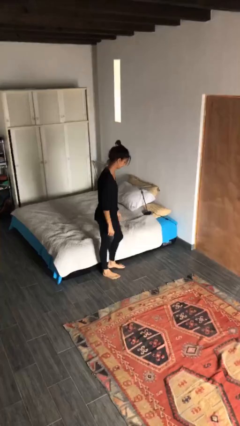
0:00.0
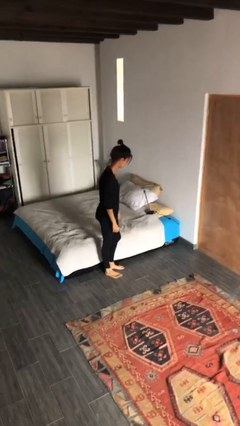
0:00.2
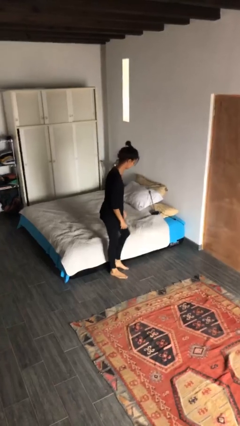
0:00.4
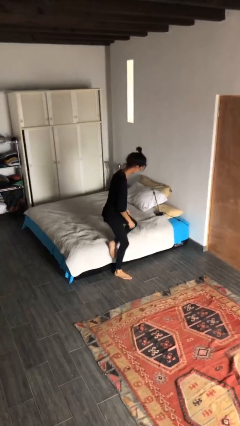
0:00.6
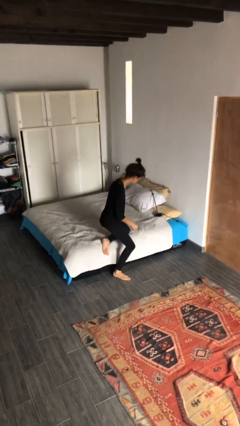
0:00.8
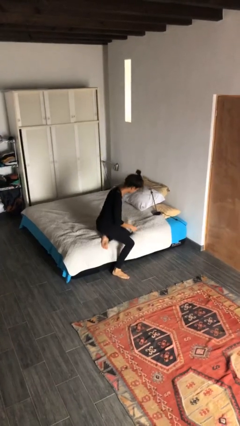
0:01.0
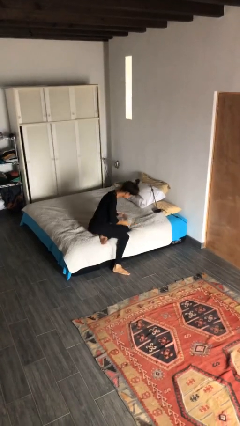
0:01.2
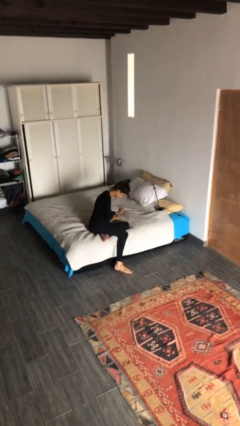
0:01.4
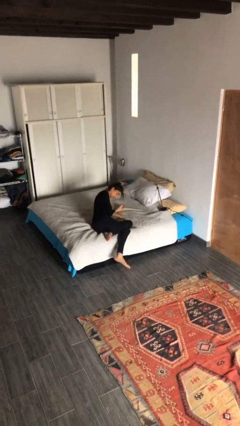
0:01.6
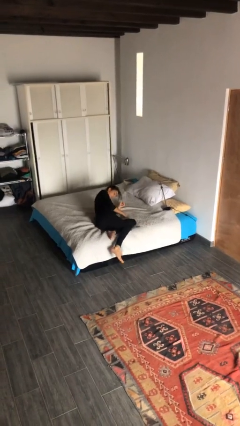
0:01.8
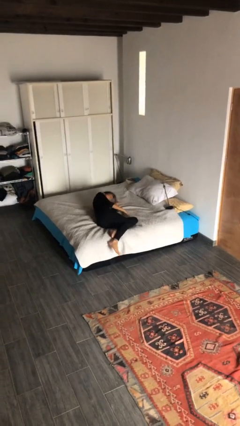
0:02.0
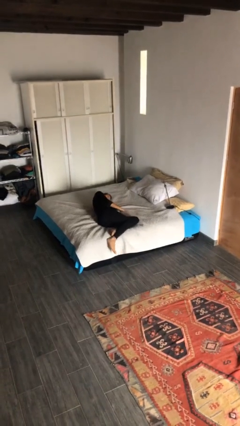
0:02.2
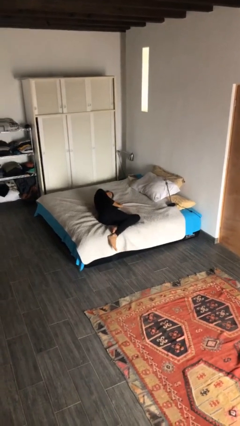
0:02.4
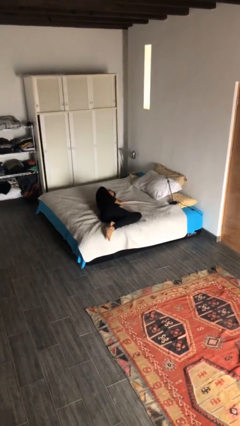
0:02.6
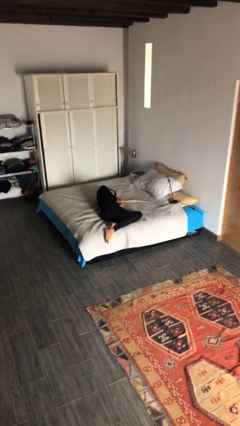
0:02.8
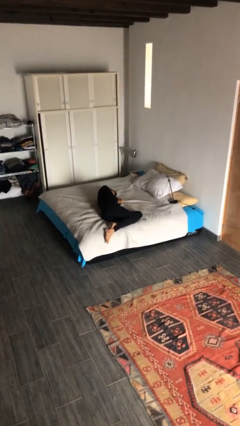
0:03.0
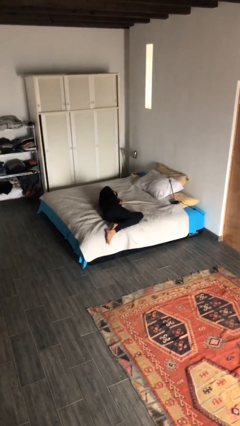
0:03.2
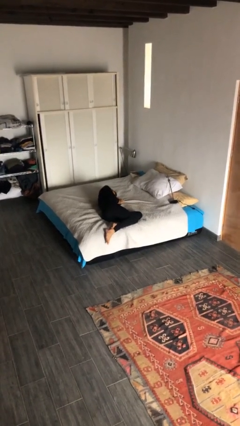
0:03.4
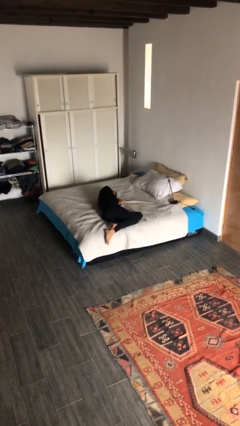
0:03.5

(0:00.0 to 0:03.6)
person lies down on bed

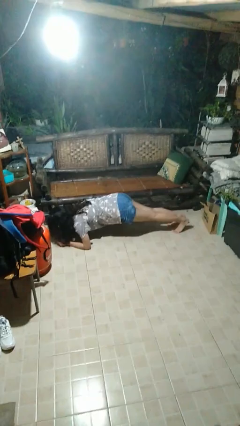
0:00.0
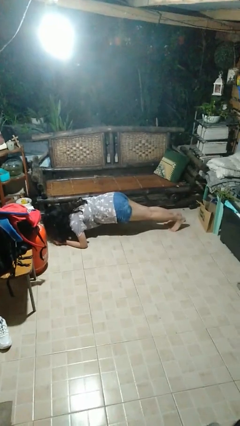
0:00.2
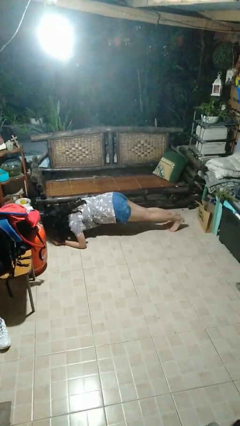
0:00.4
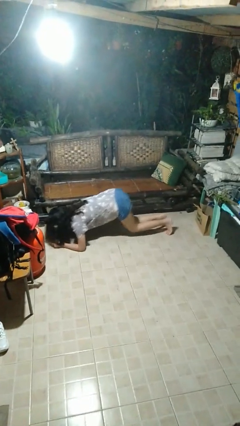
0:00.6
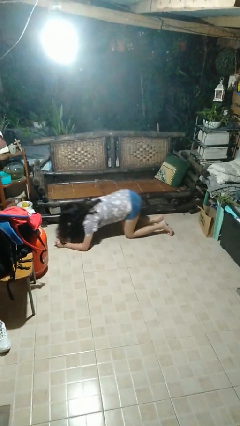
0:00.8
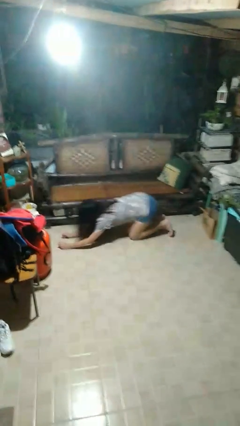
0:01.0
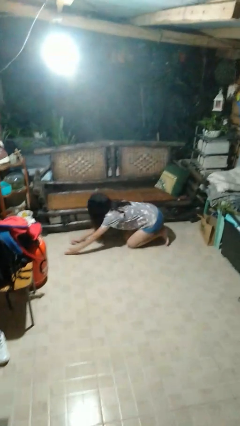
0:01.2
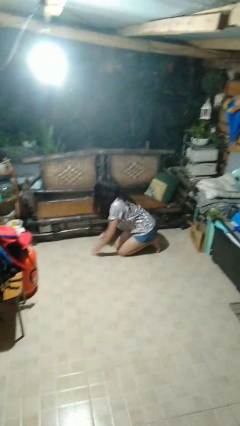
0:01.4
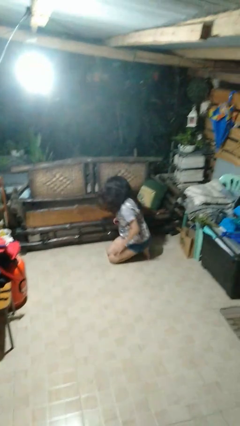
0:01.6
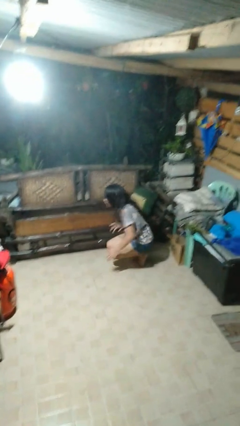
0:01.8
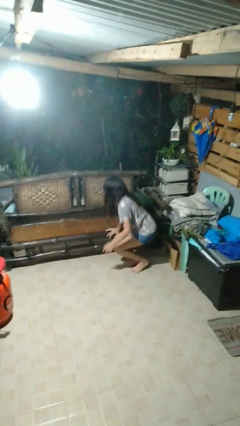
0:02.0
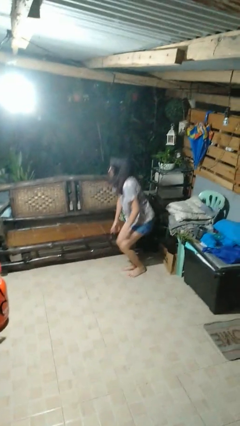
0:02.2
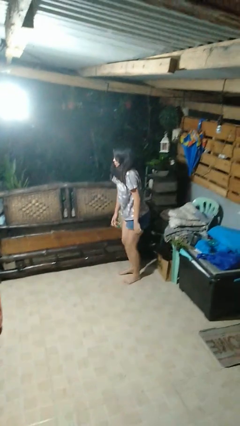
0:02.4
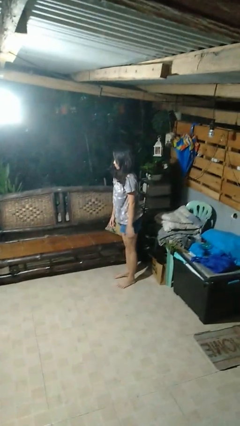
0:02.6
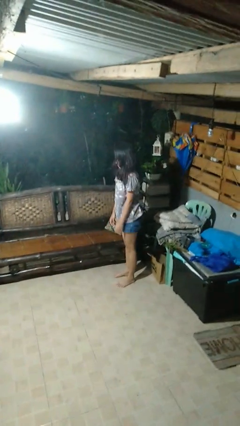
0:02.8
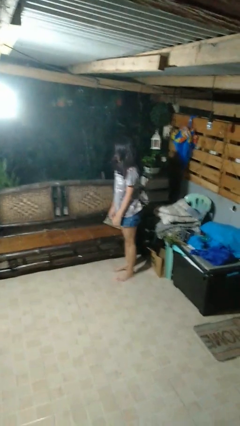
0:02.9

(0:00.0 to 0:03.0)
person stands up from floor

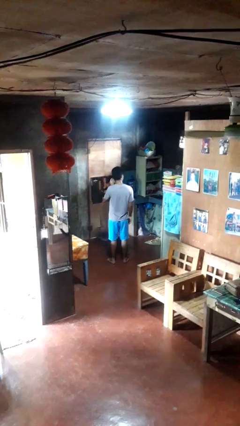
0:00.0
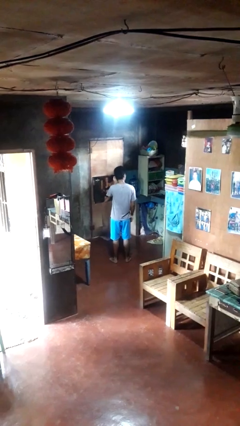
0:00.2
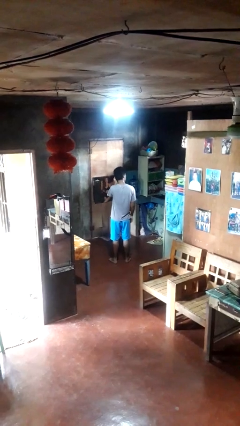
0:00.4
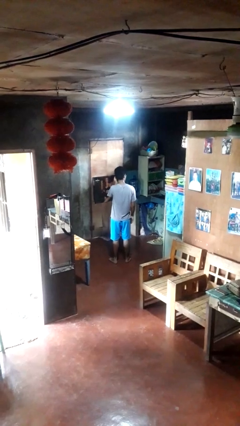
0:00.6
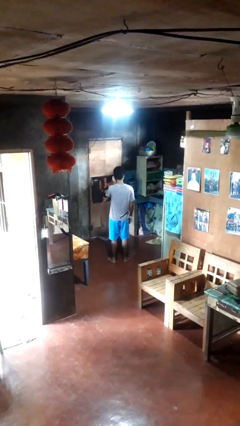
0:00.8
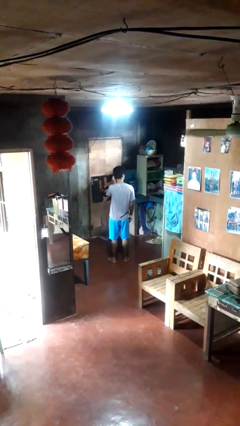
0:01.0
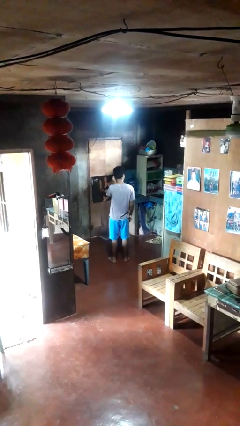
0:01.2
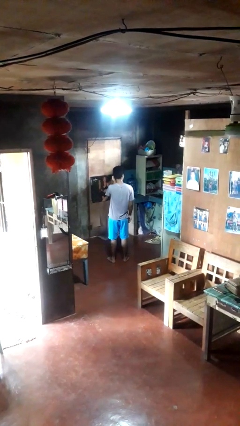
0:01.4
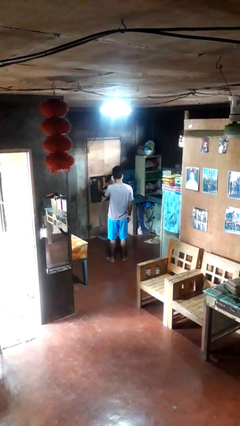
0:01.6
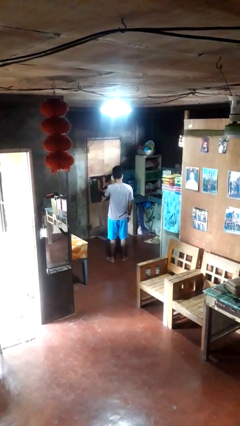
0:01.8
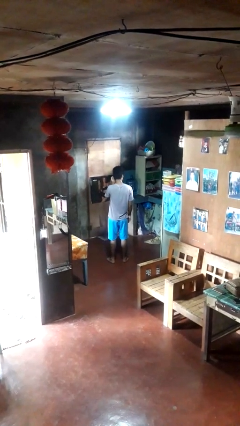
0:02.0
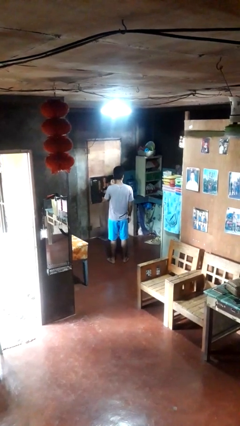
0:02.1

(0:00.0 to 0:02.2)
person touches earlobe

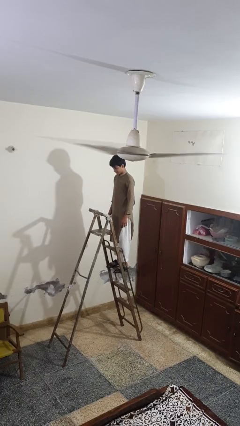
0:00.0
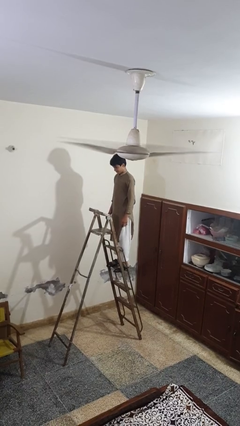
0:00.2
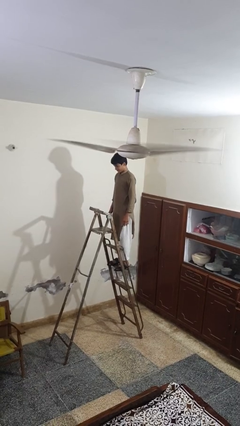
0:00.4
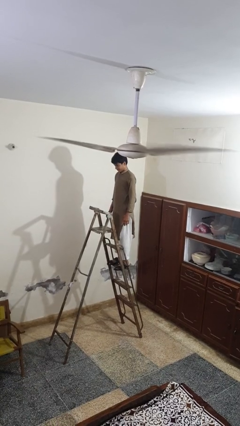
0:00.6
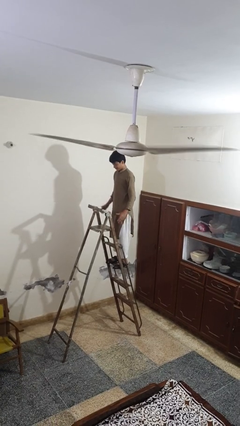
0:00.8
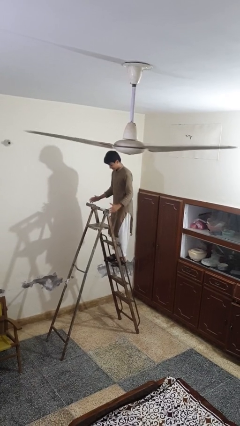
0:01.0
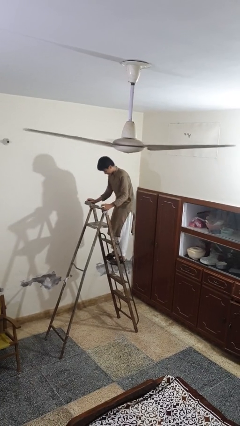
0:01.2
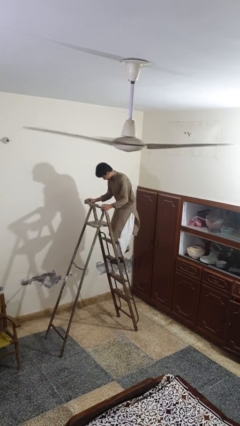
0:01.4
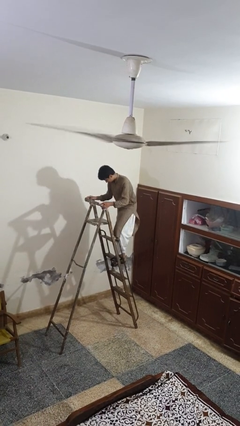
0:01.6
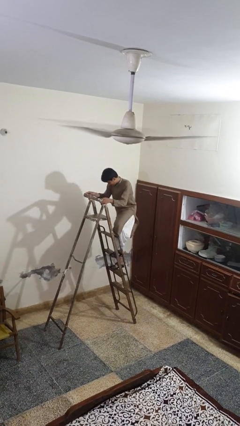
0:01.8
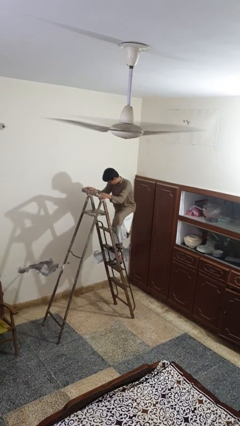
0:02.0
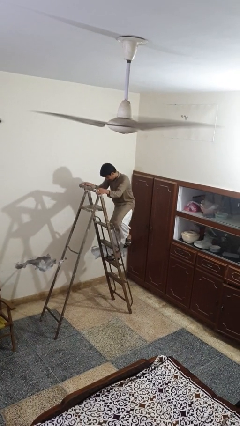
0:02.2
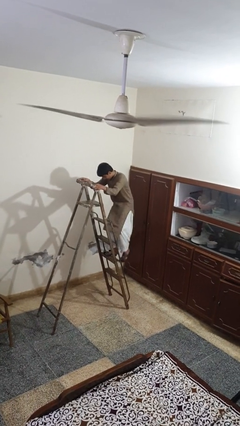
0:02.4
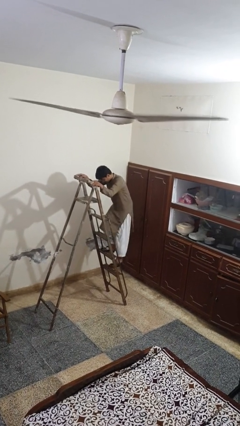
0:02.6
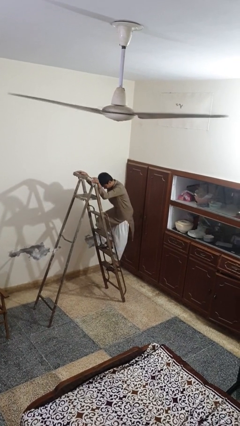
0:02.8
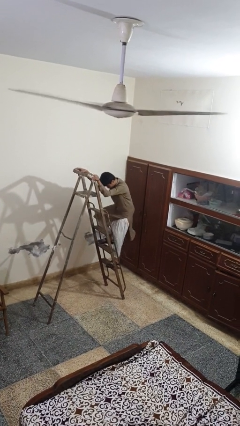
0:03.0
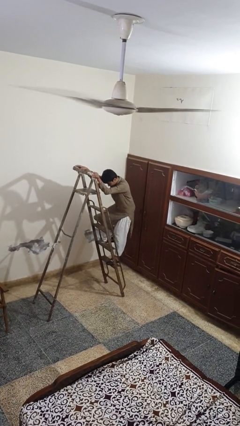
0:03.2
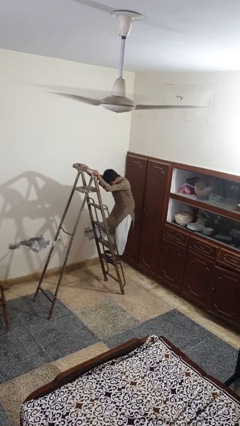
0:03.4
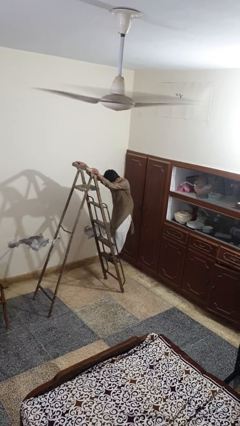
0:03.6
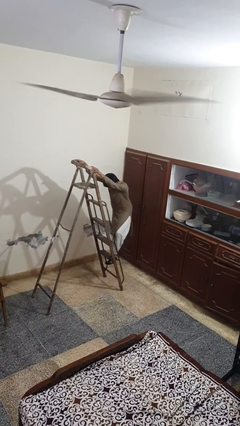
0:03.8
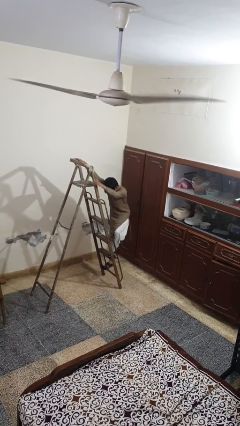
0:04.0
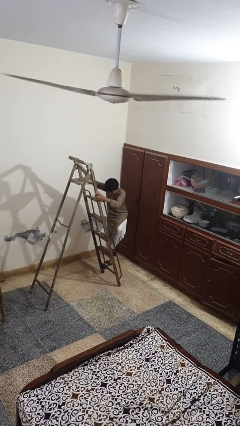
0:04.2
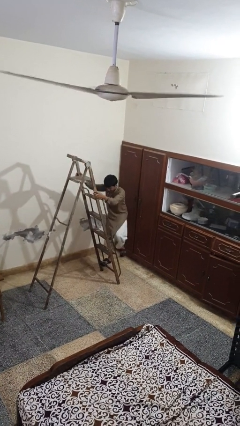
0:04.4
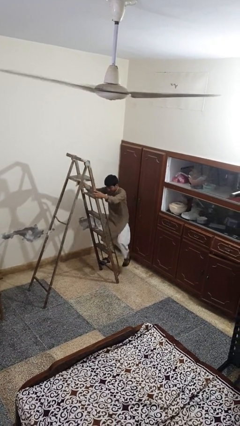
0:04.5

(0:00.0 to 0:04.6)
person climbs down ladder

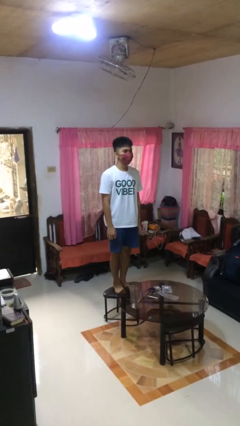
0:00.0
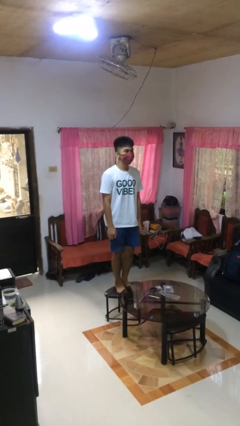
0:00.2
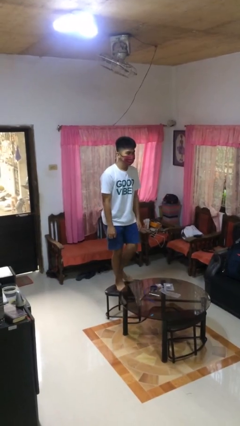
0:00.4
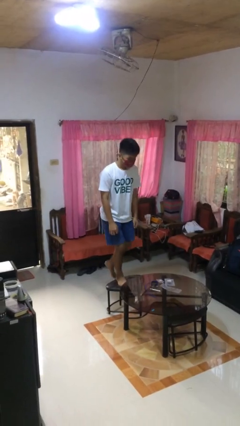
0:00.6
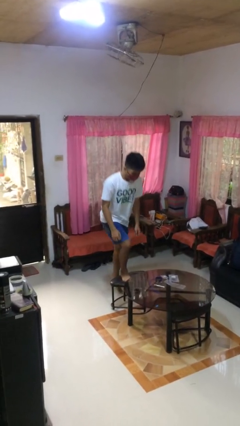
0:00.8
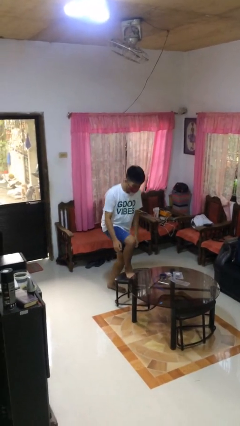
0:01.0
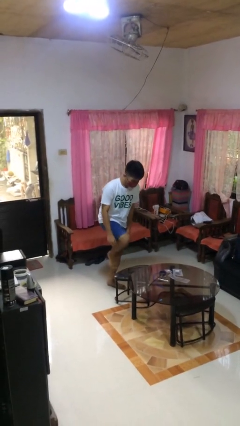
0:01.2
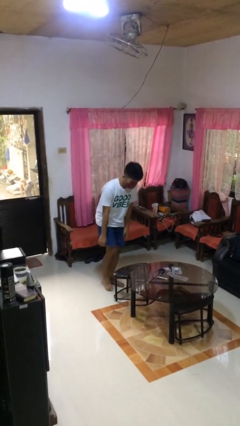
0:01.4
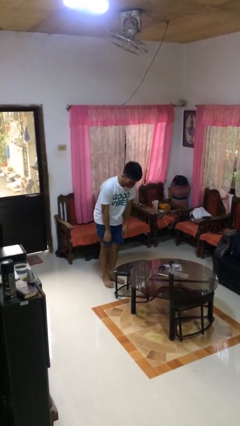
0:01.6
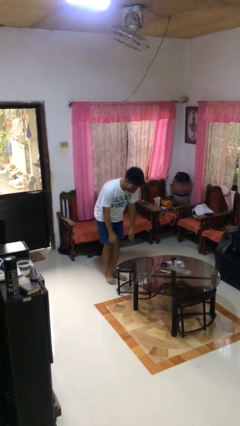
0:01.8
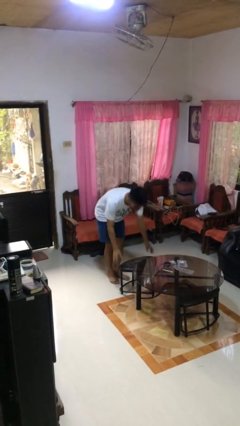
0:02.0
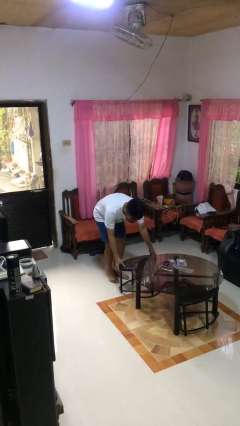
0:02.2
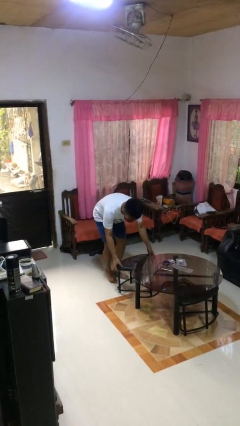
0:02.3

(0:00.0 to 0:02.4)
person climbs off chair

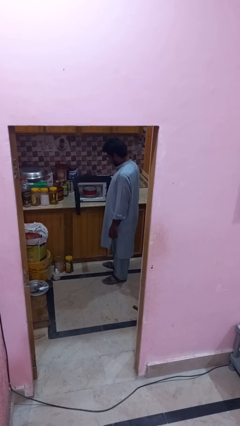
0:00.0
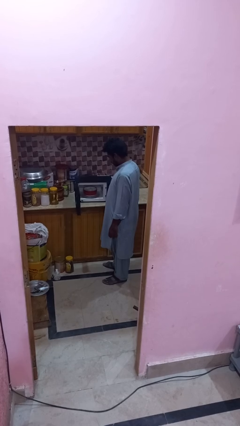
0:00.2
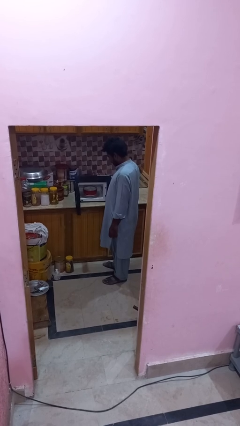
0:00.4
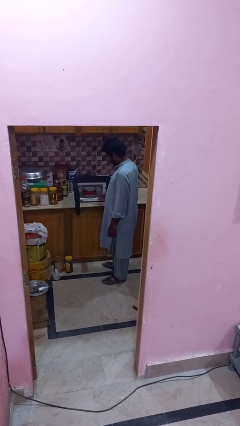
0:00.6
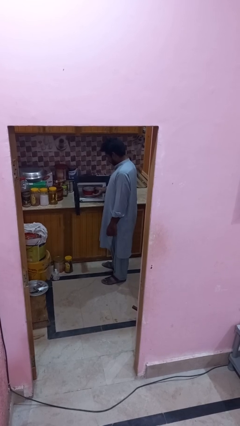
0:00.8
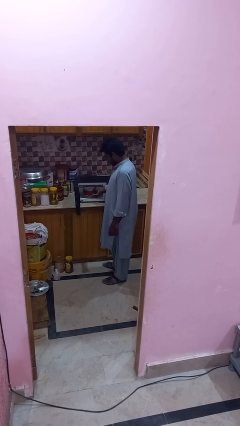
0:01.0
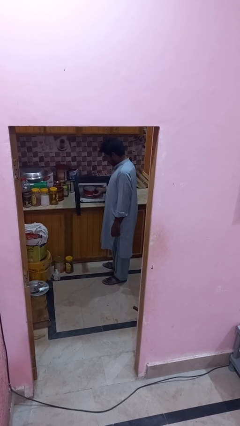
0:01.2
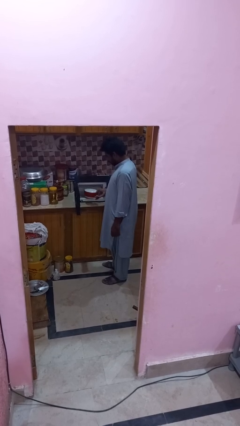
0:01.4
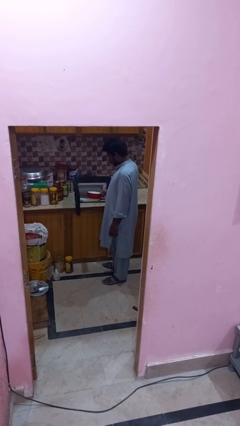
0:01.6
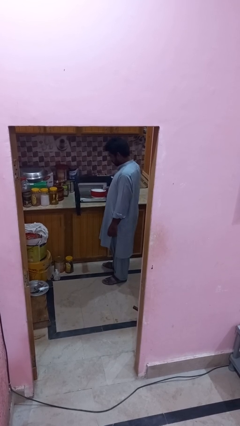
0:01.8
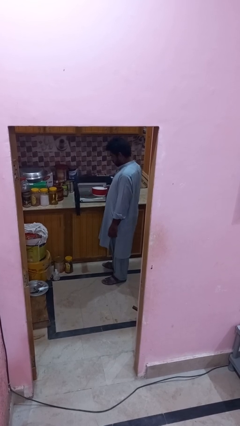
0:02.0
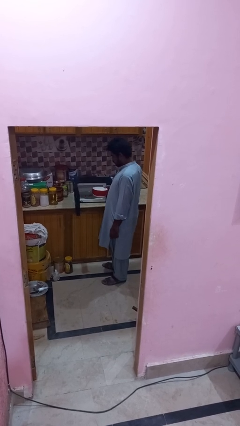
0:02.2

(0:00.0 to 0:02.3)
person takes object from microwave
